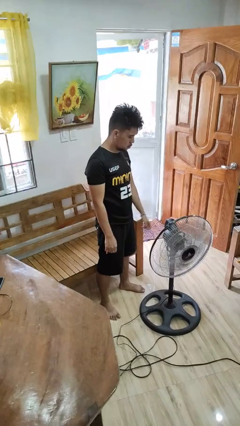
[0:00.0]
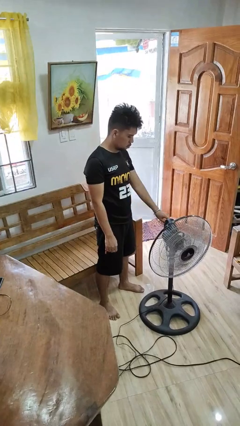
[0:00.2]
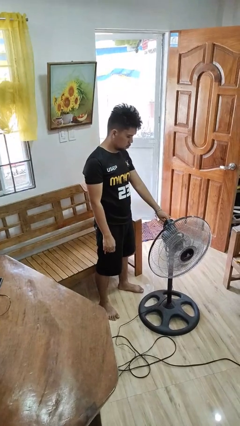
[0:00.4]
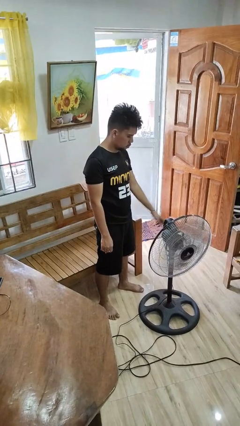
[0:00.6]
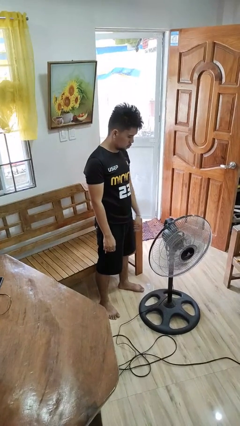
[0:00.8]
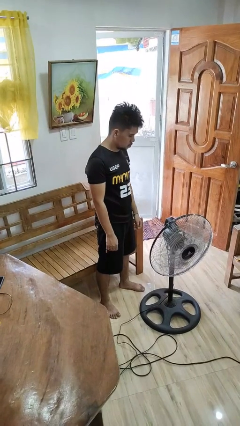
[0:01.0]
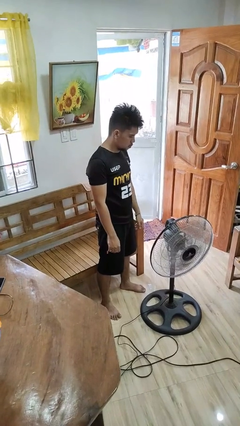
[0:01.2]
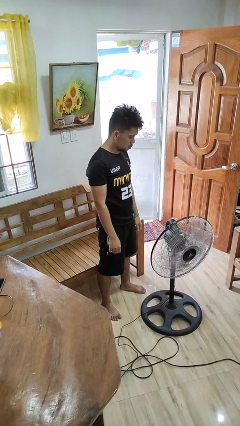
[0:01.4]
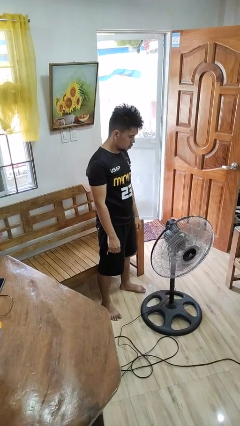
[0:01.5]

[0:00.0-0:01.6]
person turns off fan

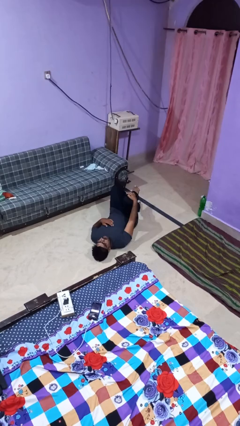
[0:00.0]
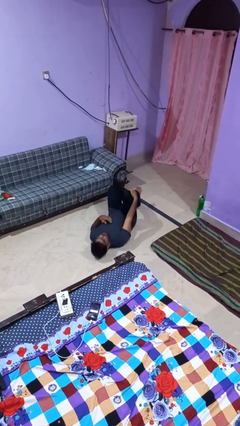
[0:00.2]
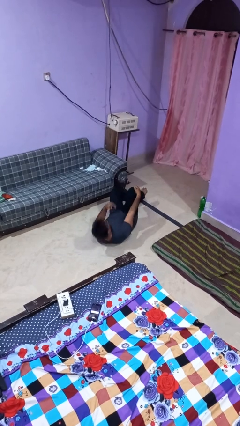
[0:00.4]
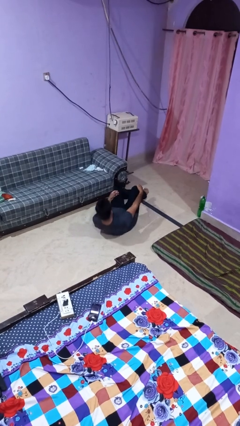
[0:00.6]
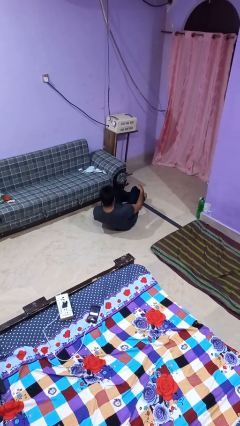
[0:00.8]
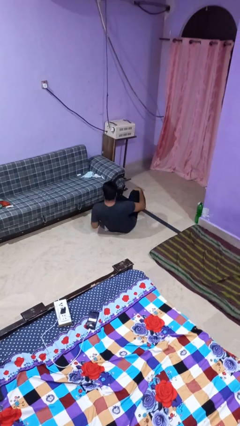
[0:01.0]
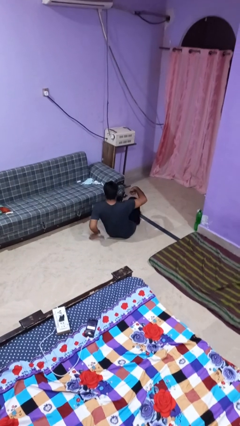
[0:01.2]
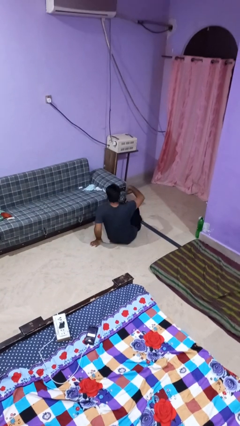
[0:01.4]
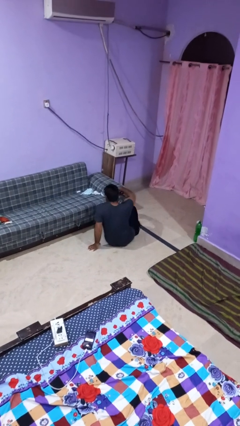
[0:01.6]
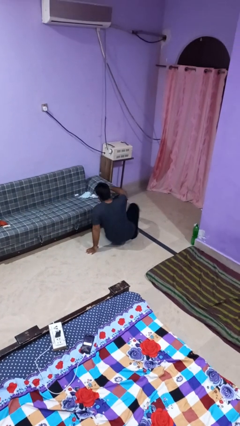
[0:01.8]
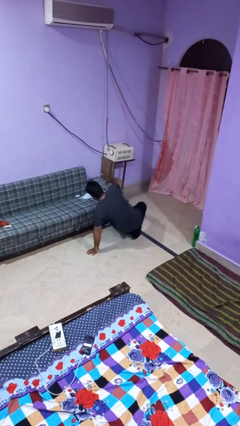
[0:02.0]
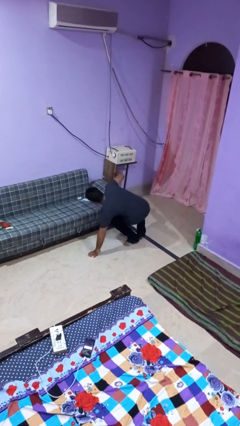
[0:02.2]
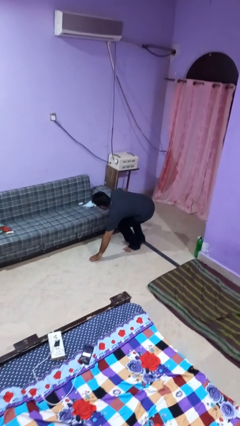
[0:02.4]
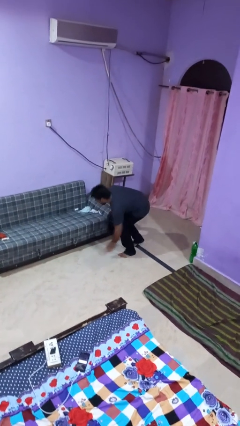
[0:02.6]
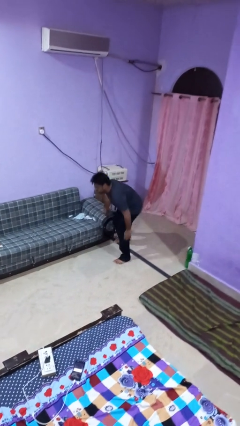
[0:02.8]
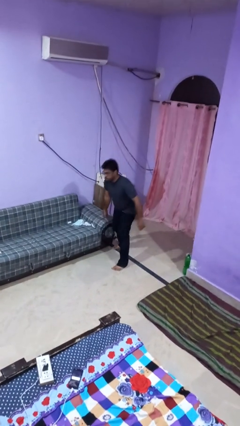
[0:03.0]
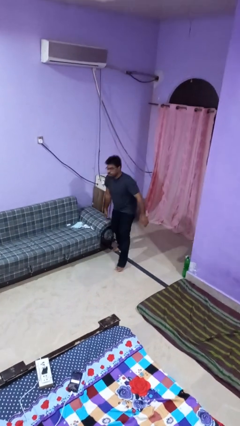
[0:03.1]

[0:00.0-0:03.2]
person stands up from floor

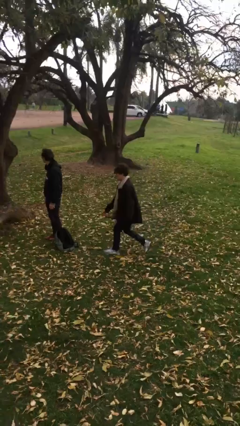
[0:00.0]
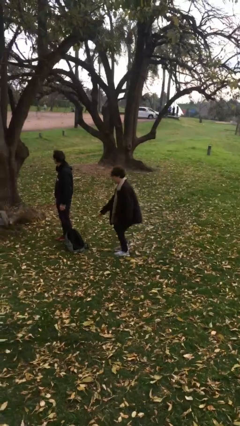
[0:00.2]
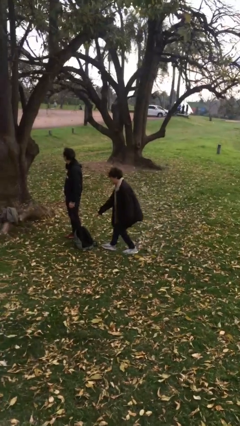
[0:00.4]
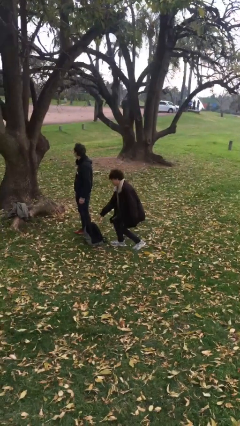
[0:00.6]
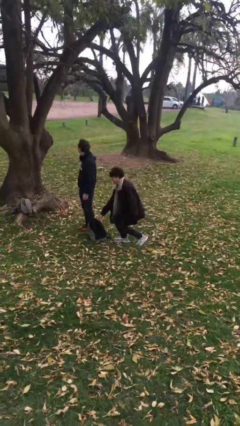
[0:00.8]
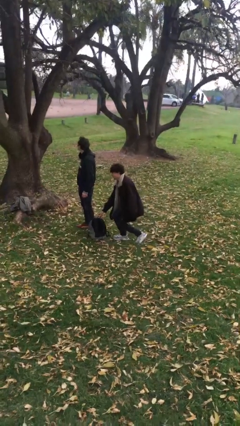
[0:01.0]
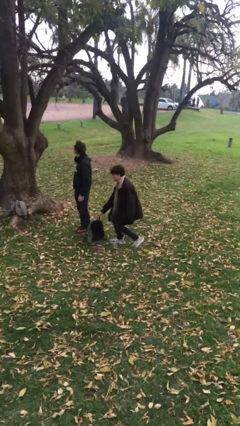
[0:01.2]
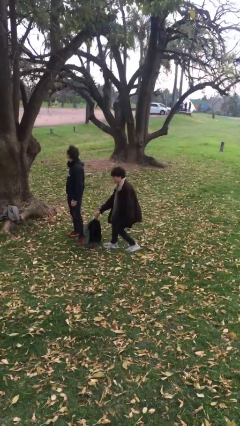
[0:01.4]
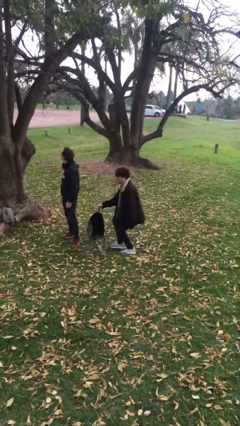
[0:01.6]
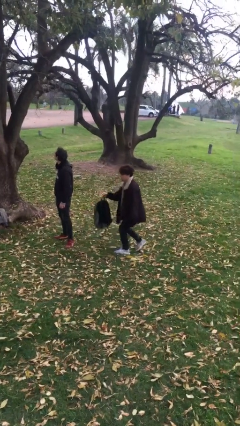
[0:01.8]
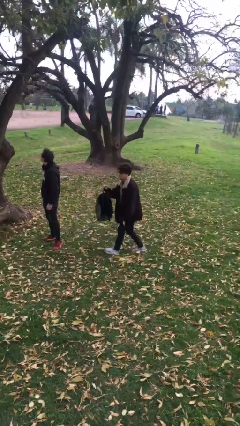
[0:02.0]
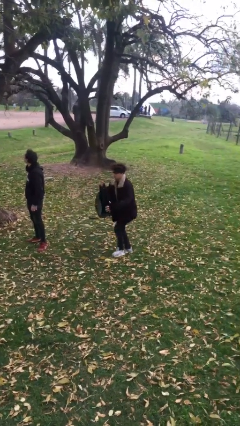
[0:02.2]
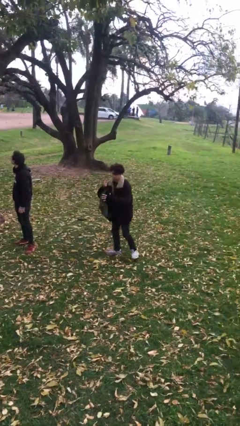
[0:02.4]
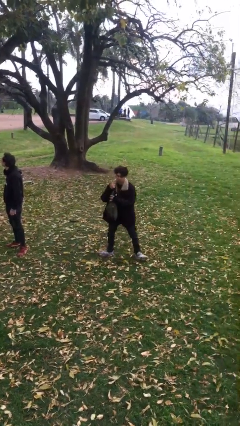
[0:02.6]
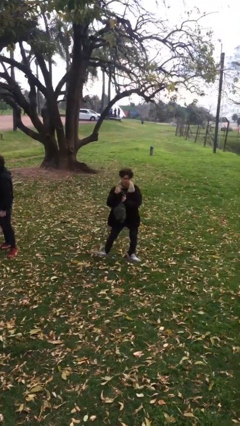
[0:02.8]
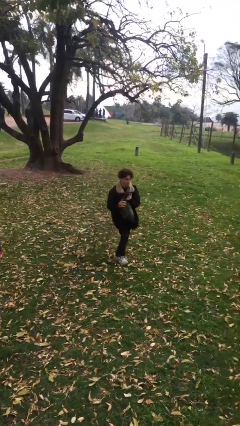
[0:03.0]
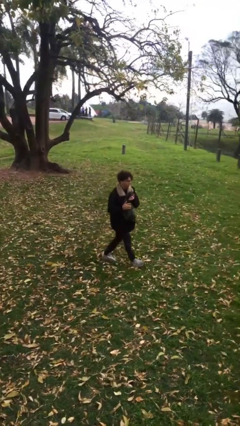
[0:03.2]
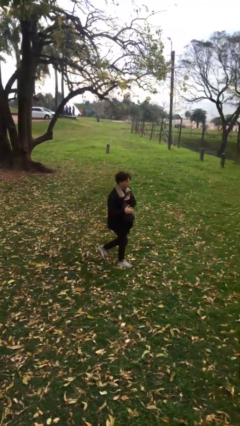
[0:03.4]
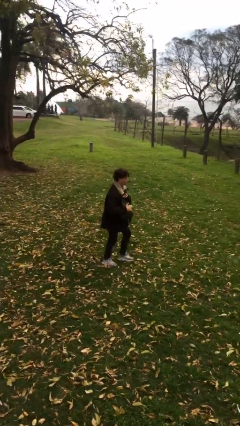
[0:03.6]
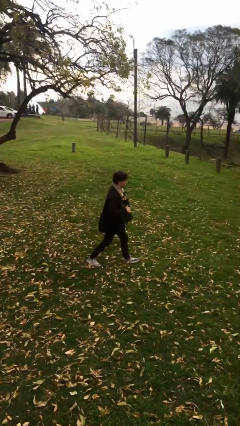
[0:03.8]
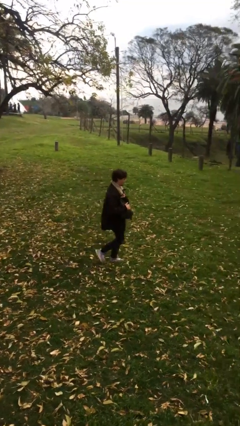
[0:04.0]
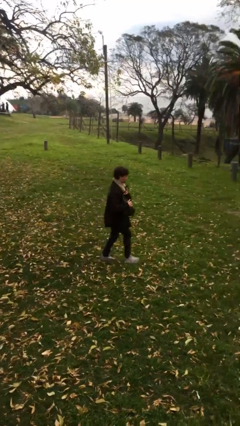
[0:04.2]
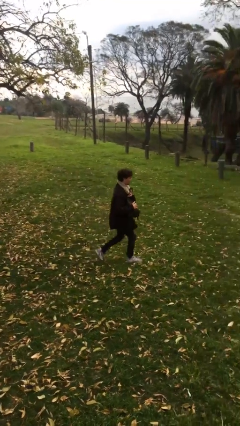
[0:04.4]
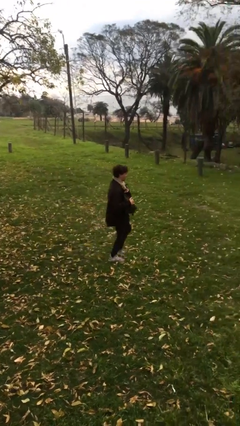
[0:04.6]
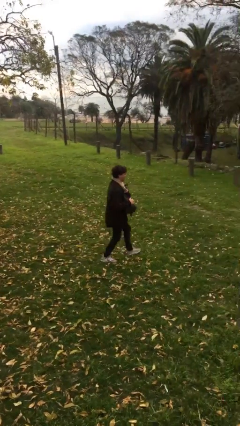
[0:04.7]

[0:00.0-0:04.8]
person steals object from person

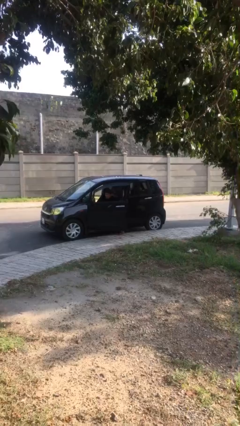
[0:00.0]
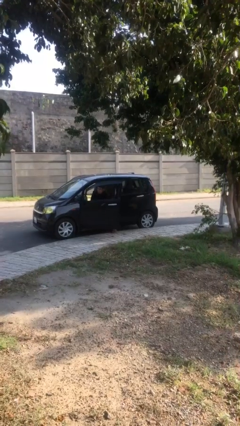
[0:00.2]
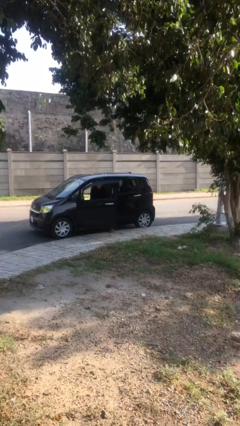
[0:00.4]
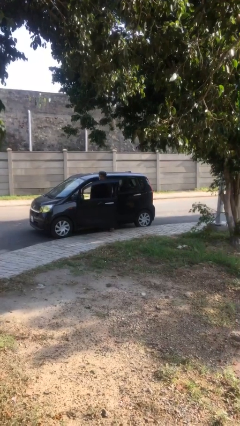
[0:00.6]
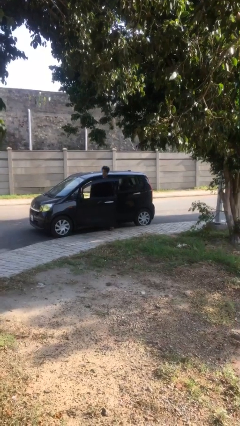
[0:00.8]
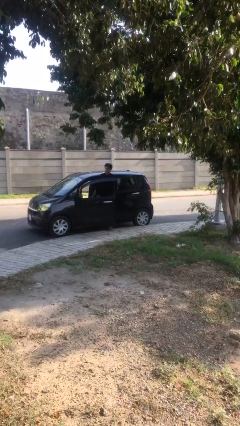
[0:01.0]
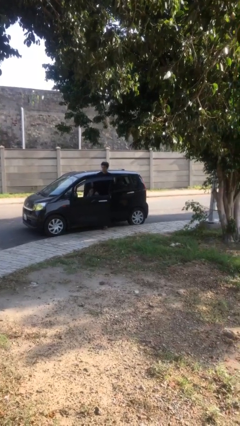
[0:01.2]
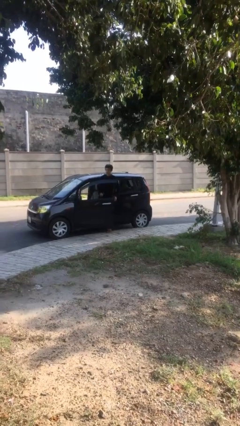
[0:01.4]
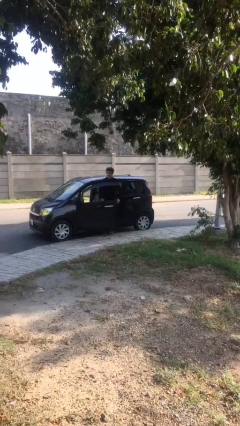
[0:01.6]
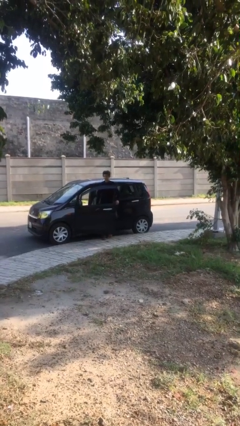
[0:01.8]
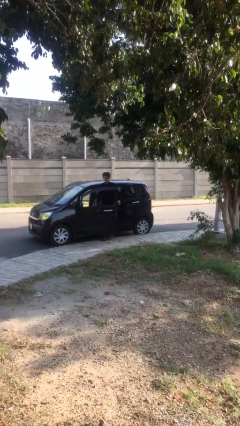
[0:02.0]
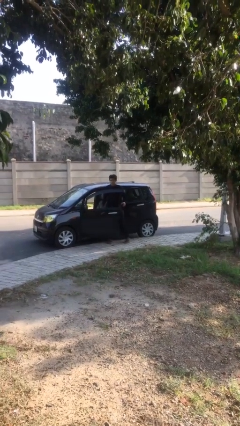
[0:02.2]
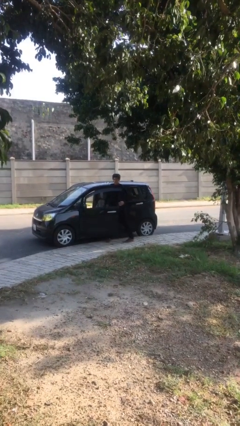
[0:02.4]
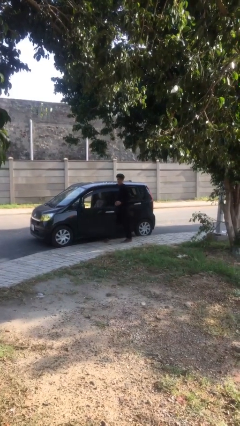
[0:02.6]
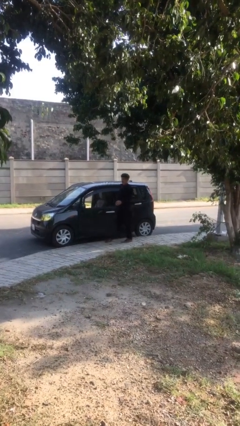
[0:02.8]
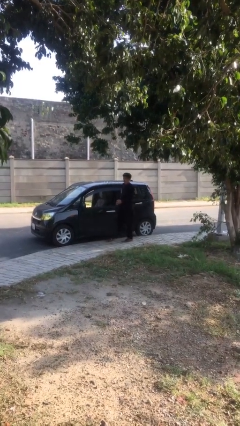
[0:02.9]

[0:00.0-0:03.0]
person exits car

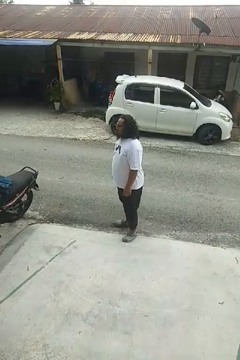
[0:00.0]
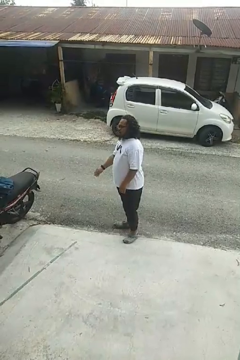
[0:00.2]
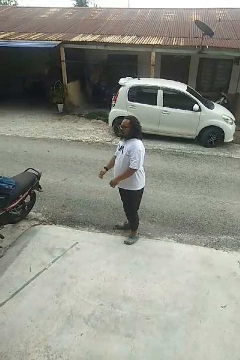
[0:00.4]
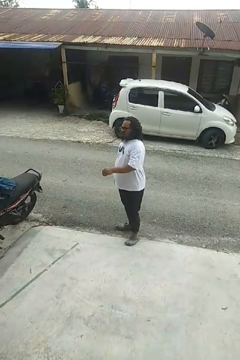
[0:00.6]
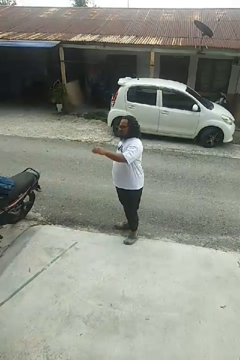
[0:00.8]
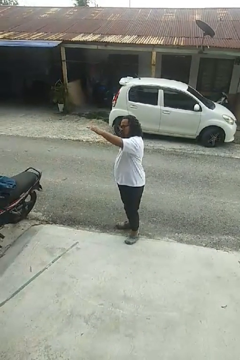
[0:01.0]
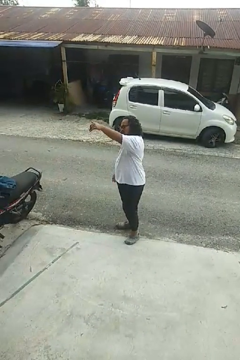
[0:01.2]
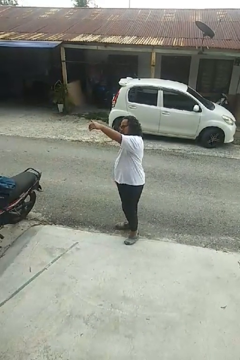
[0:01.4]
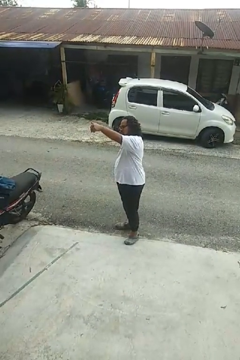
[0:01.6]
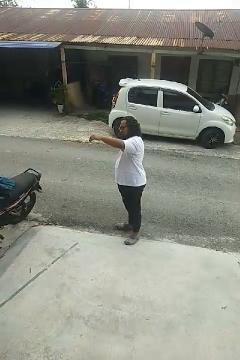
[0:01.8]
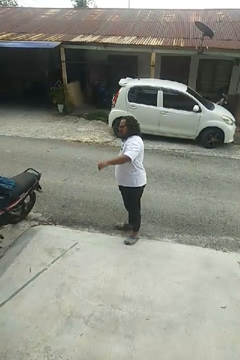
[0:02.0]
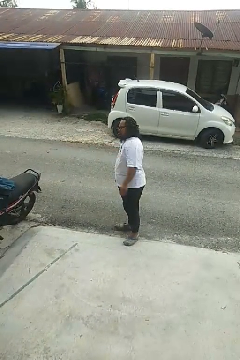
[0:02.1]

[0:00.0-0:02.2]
person gestures come here

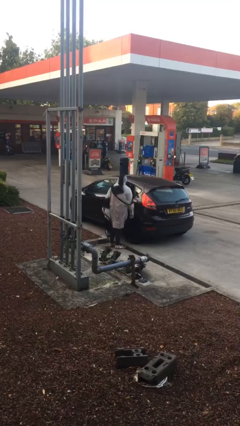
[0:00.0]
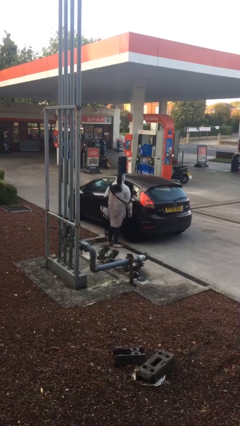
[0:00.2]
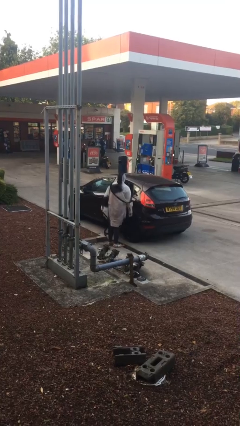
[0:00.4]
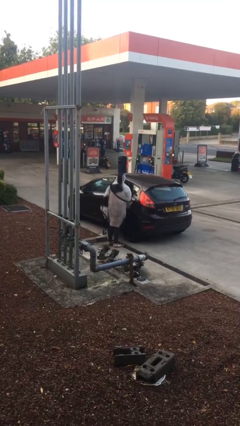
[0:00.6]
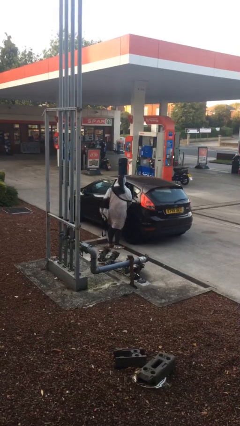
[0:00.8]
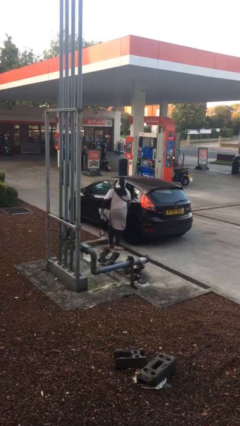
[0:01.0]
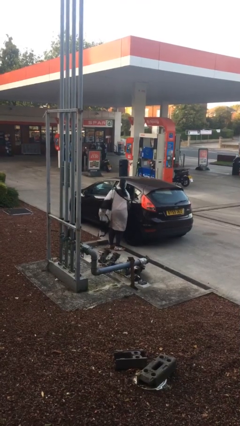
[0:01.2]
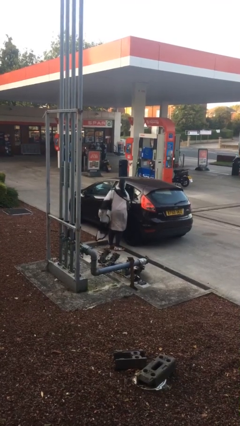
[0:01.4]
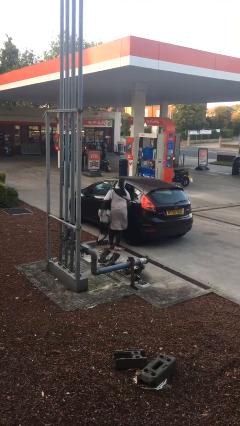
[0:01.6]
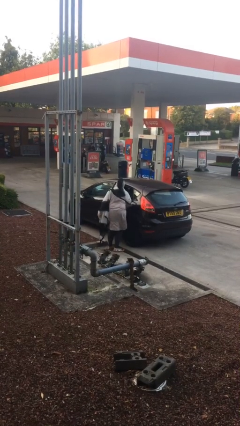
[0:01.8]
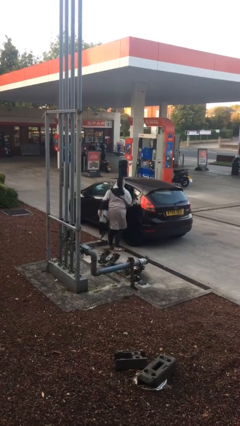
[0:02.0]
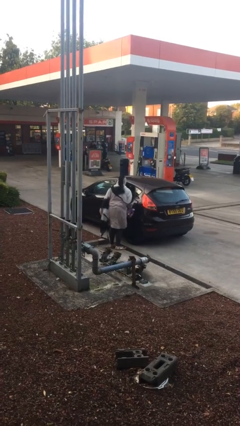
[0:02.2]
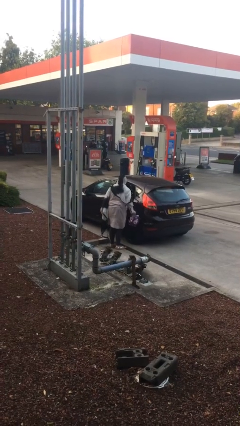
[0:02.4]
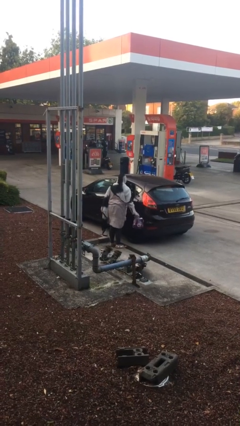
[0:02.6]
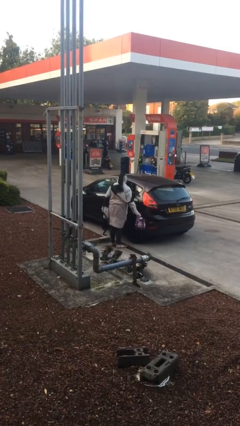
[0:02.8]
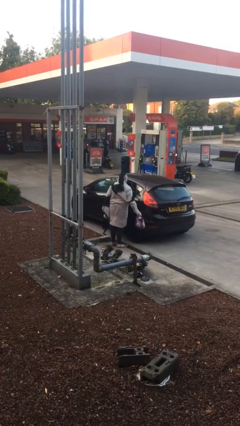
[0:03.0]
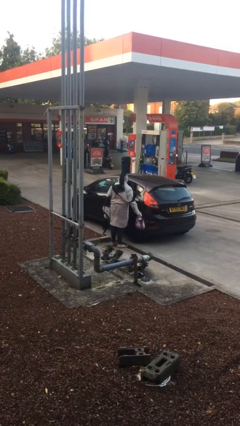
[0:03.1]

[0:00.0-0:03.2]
person unloads car
